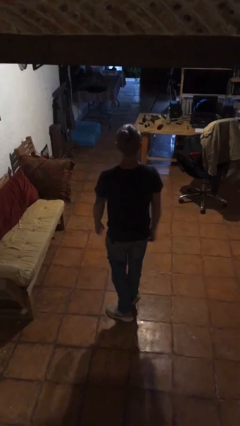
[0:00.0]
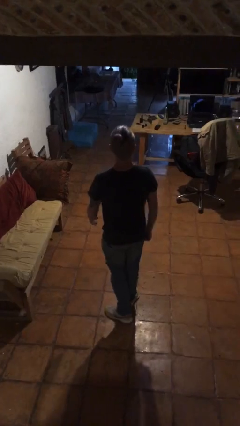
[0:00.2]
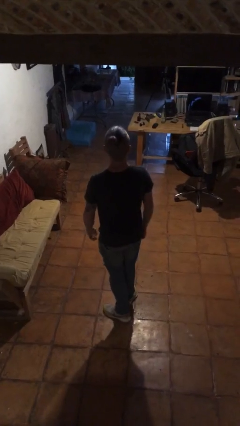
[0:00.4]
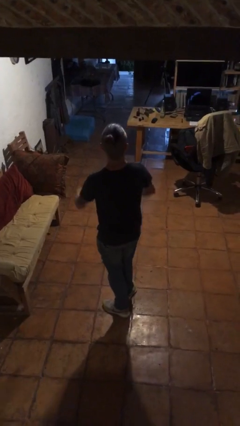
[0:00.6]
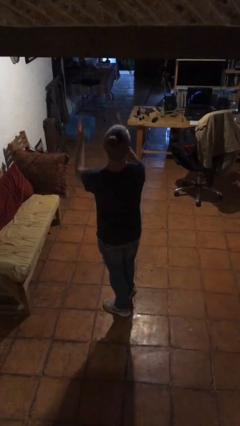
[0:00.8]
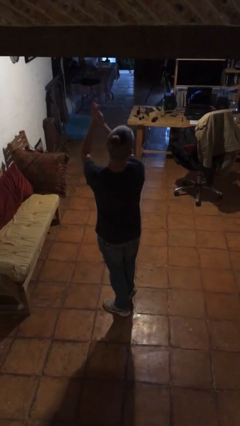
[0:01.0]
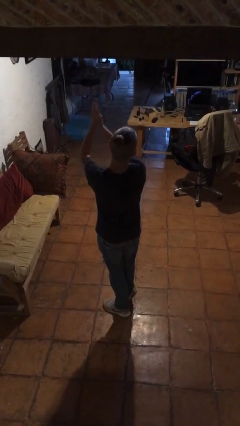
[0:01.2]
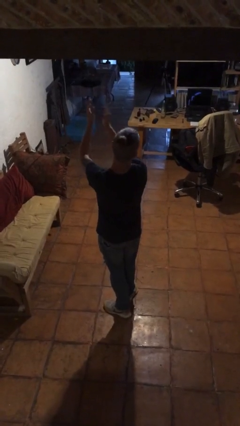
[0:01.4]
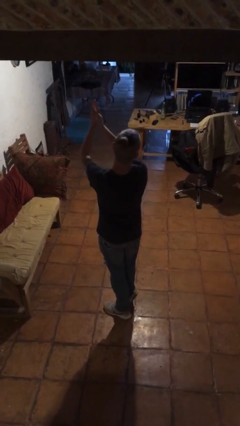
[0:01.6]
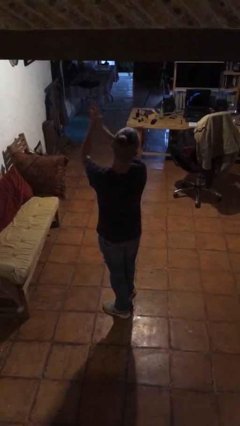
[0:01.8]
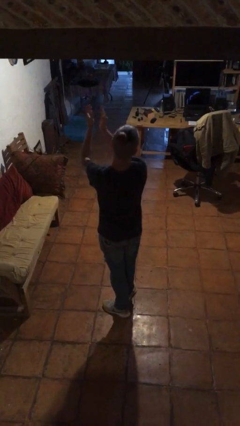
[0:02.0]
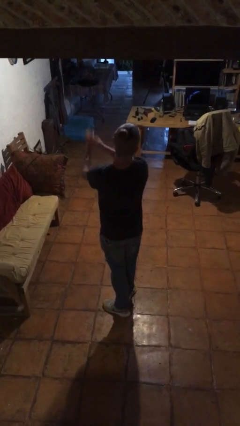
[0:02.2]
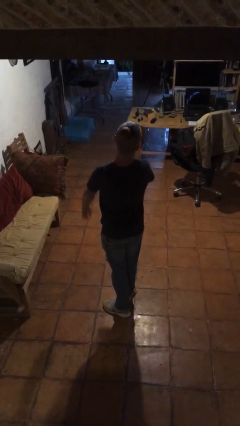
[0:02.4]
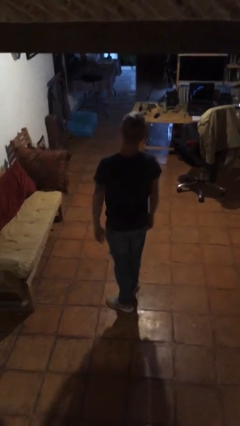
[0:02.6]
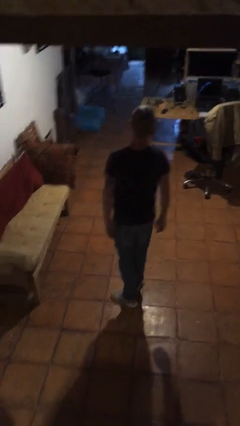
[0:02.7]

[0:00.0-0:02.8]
person claps hands

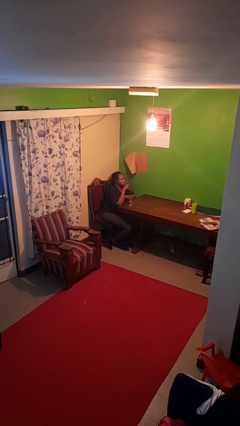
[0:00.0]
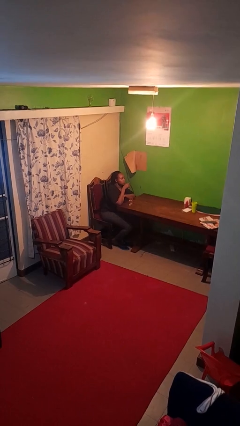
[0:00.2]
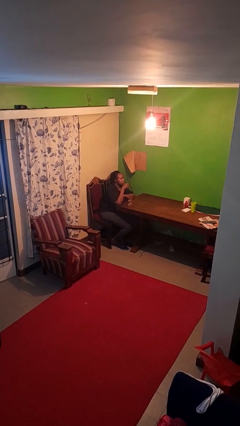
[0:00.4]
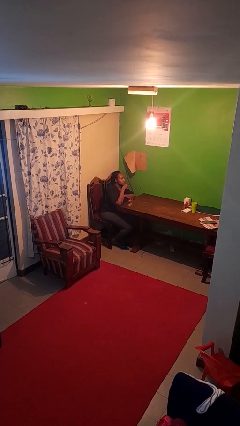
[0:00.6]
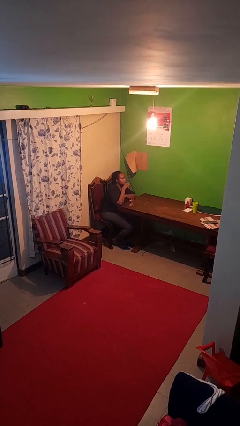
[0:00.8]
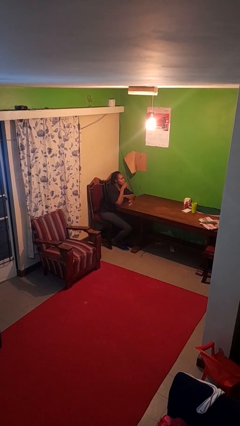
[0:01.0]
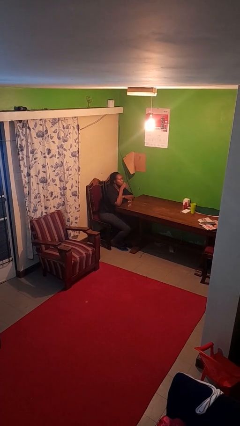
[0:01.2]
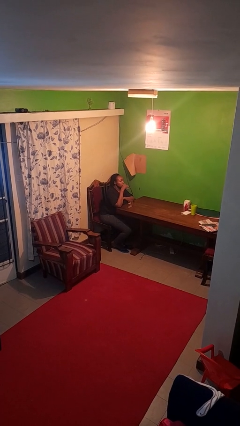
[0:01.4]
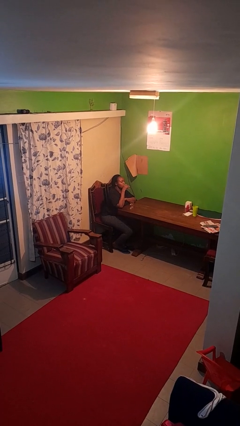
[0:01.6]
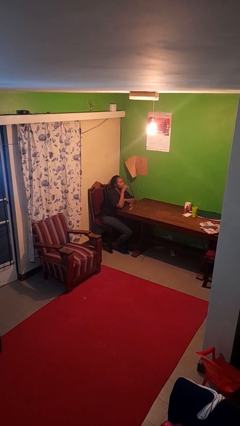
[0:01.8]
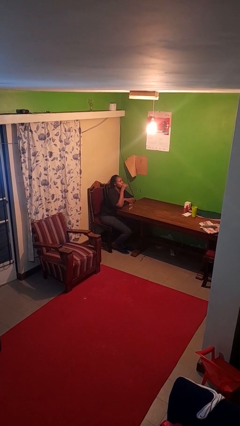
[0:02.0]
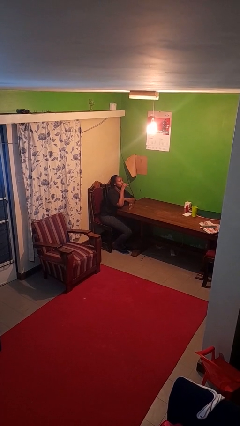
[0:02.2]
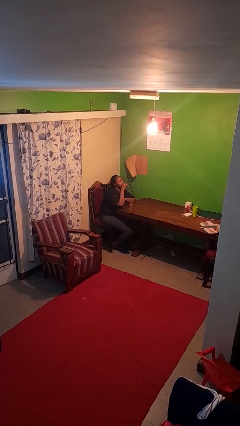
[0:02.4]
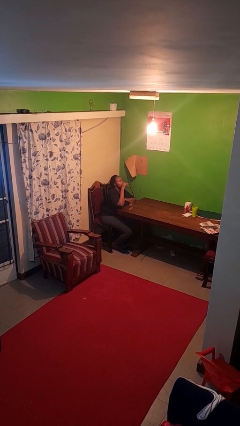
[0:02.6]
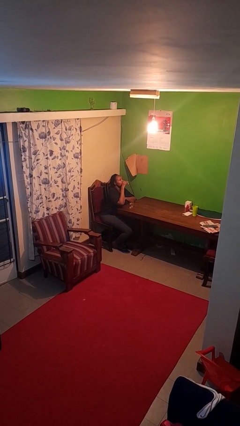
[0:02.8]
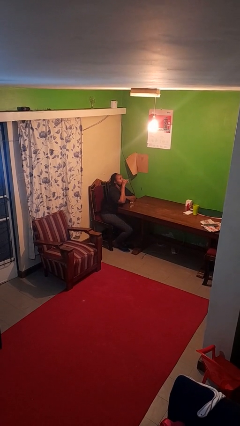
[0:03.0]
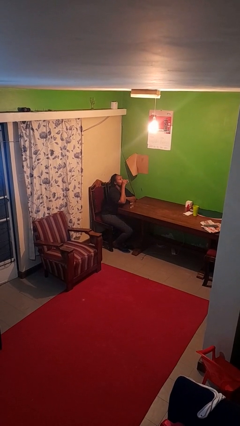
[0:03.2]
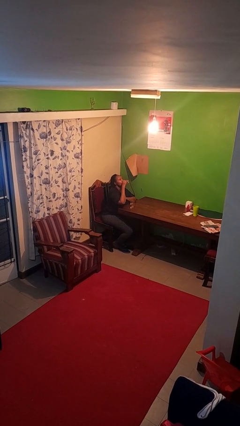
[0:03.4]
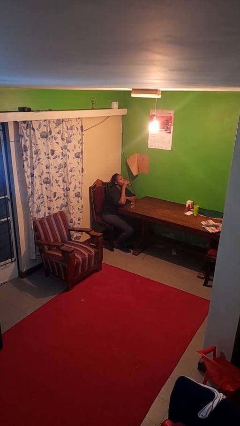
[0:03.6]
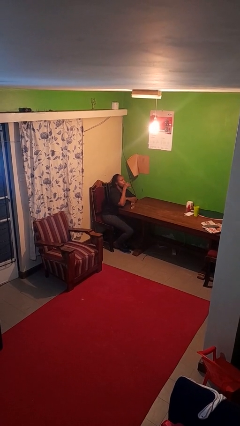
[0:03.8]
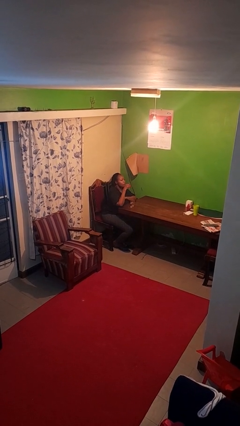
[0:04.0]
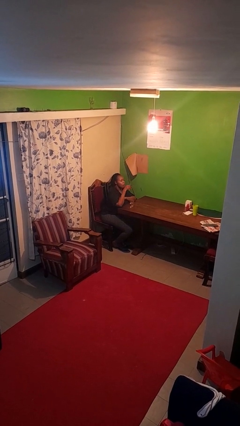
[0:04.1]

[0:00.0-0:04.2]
person drinks from shotglass

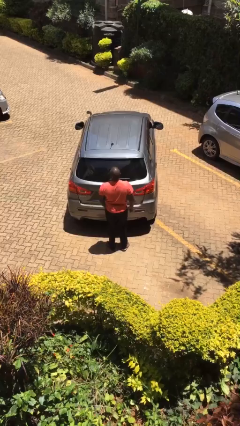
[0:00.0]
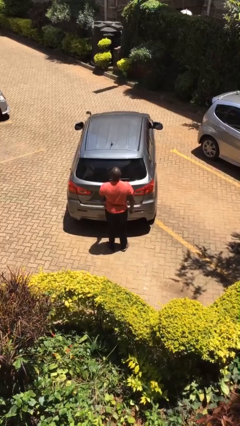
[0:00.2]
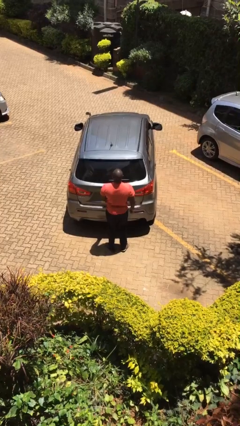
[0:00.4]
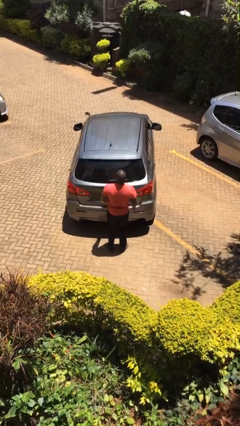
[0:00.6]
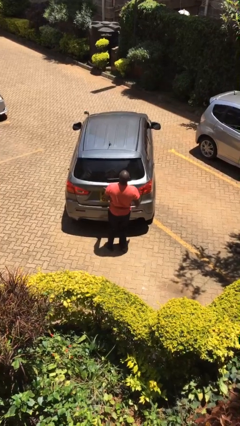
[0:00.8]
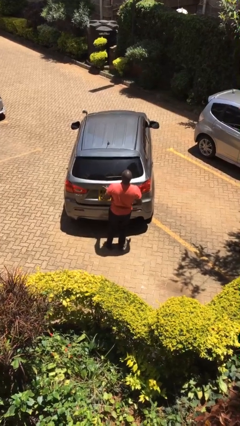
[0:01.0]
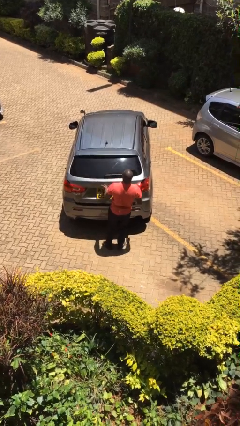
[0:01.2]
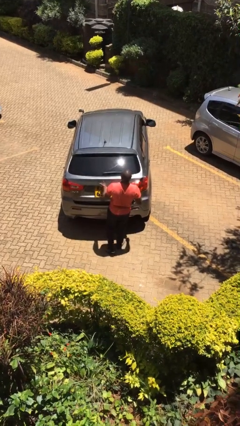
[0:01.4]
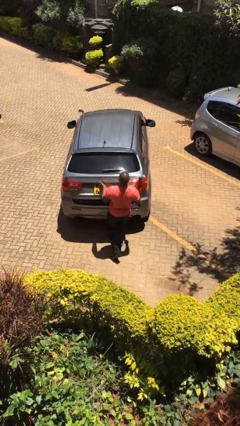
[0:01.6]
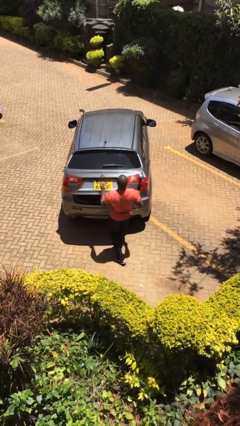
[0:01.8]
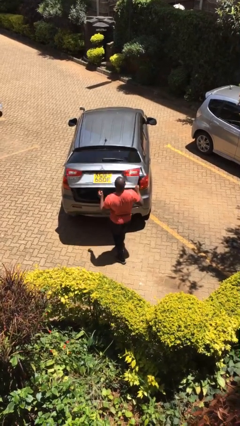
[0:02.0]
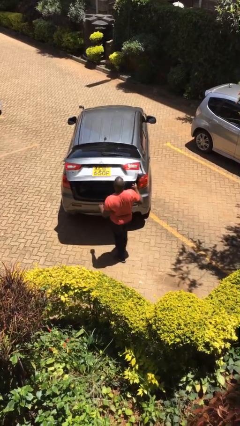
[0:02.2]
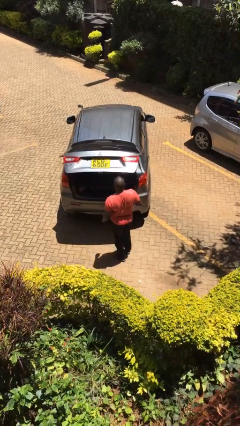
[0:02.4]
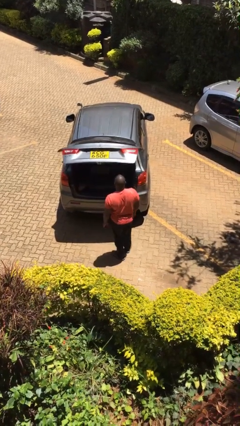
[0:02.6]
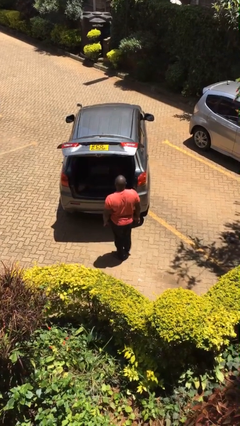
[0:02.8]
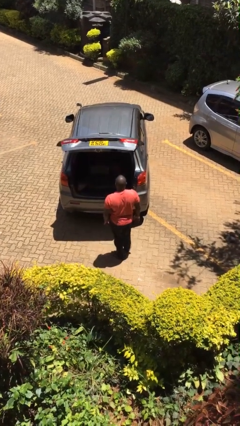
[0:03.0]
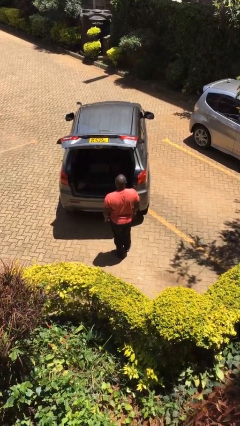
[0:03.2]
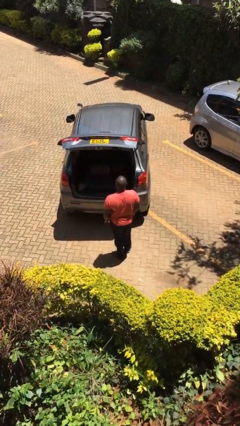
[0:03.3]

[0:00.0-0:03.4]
person opens car trunk

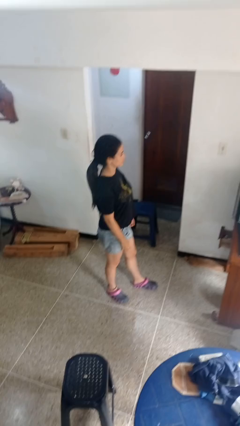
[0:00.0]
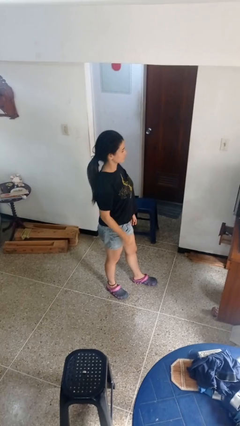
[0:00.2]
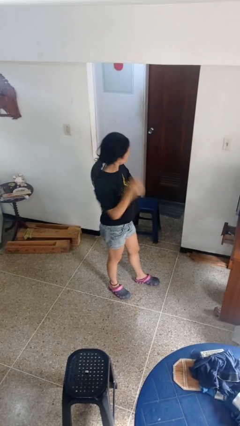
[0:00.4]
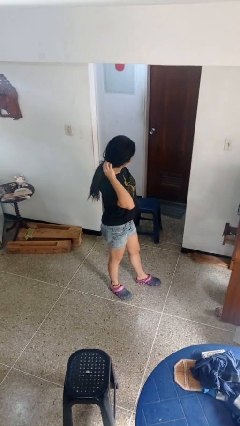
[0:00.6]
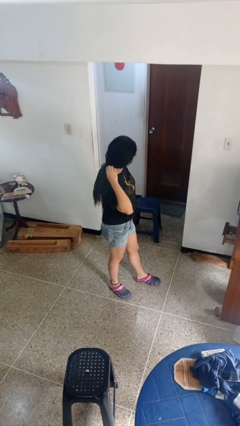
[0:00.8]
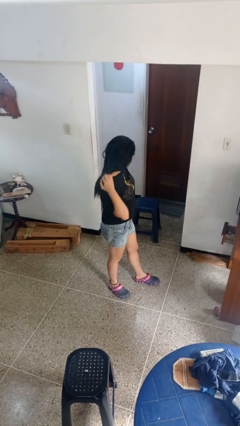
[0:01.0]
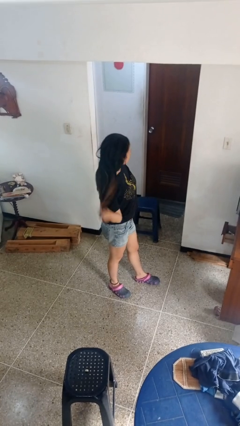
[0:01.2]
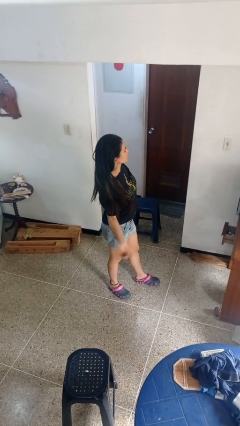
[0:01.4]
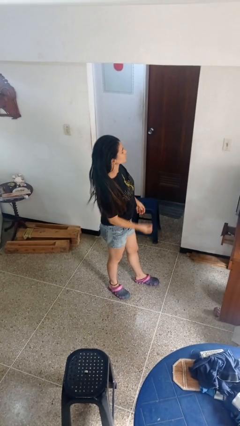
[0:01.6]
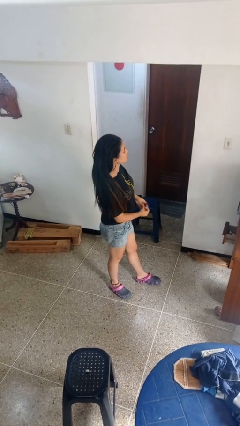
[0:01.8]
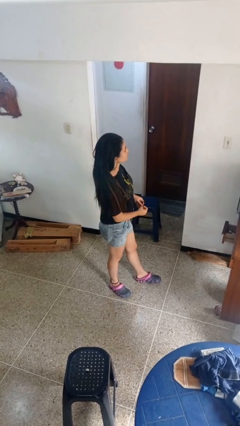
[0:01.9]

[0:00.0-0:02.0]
person takes off hairtie

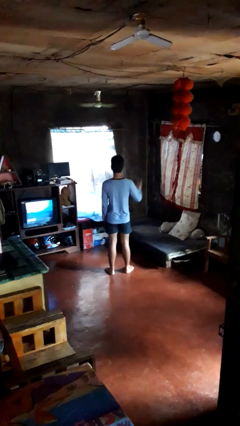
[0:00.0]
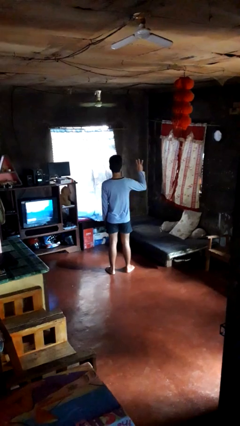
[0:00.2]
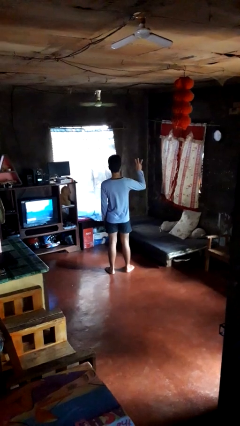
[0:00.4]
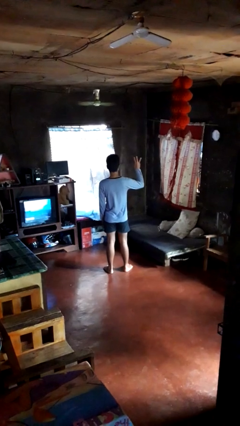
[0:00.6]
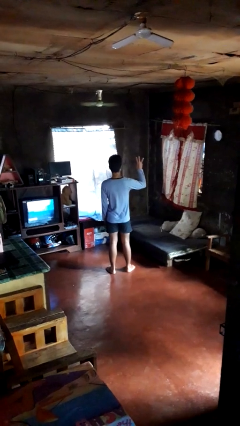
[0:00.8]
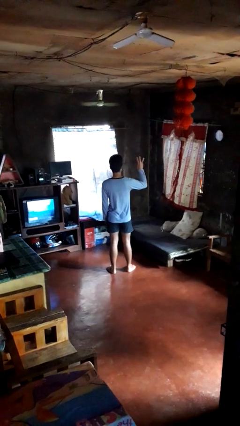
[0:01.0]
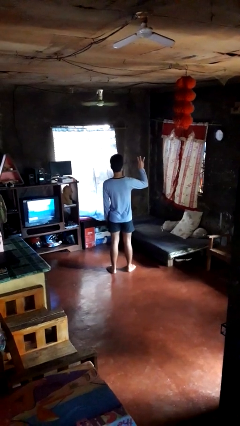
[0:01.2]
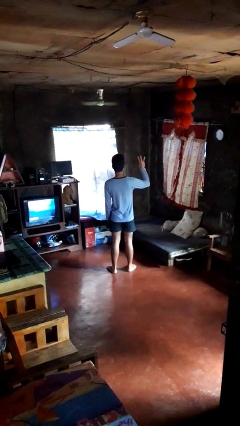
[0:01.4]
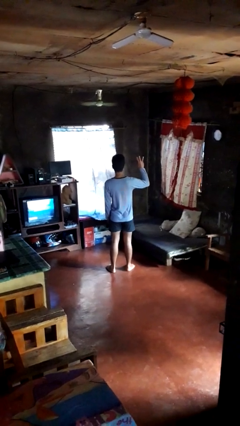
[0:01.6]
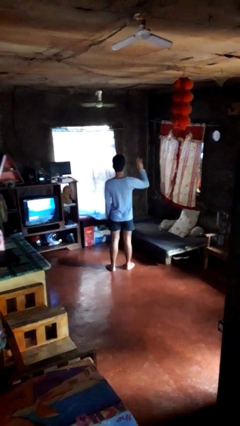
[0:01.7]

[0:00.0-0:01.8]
person gestures number three

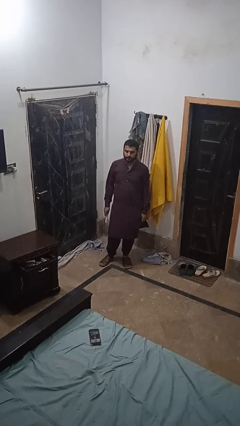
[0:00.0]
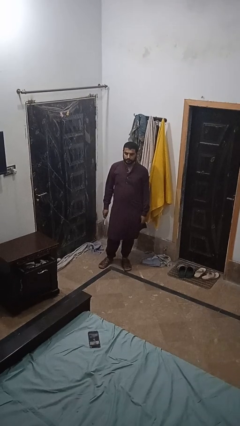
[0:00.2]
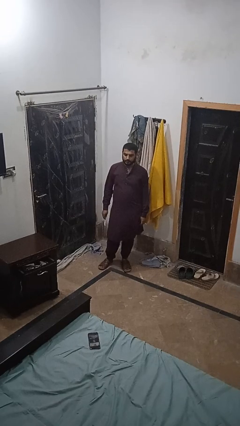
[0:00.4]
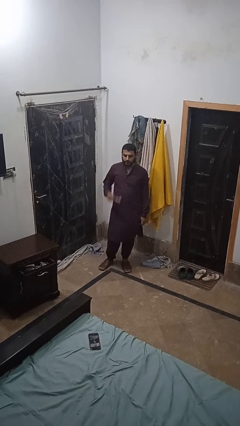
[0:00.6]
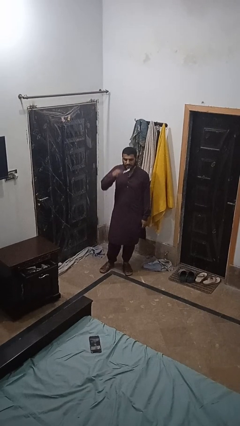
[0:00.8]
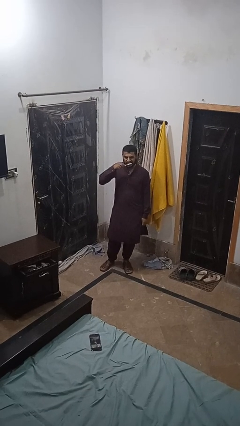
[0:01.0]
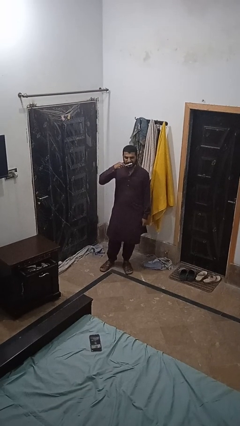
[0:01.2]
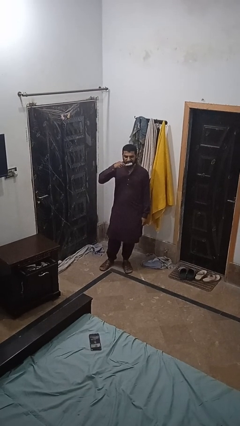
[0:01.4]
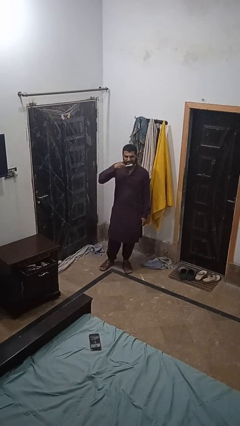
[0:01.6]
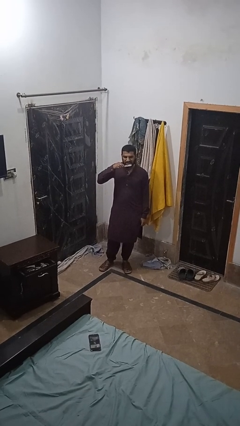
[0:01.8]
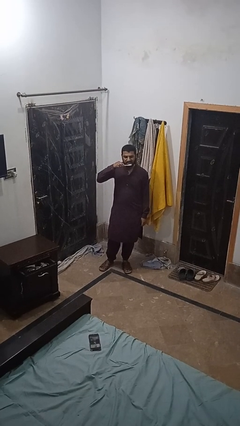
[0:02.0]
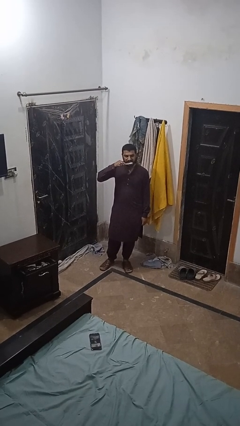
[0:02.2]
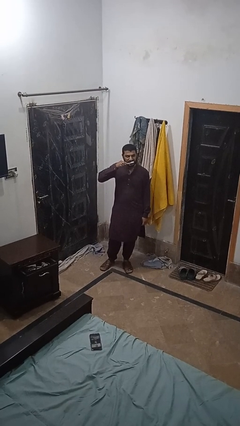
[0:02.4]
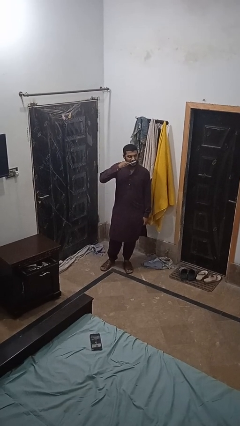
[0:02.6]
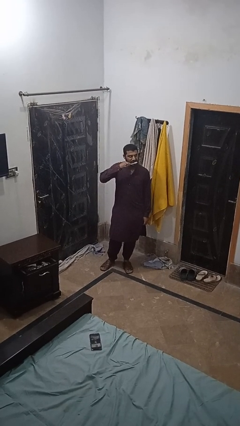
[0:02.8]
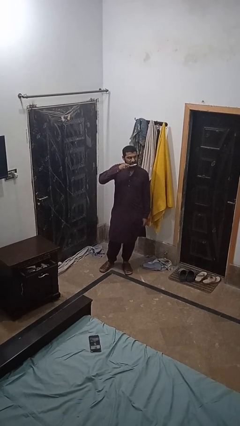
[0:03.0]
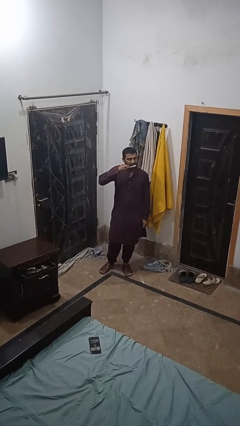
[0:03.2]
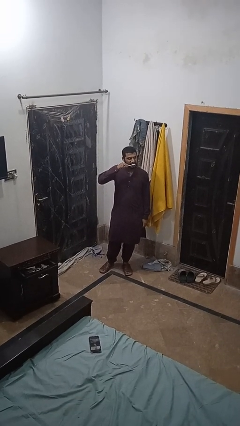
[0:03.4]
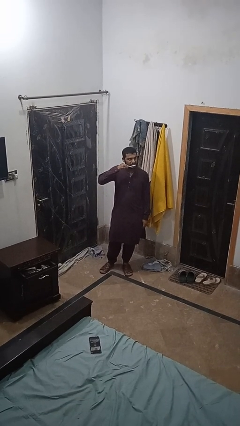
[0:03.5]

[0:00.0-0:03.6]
person brushes teeth
